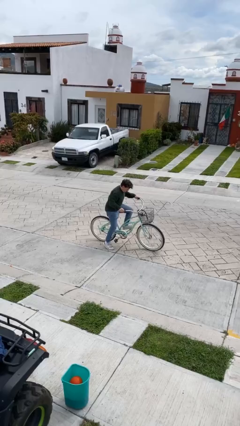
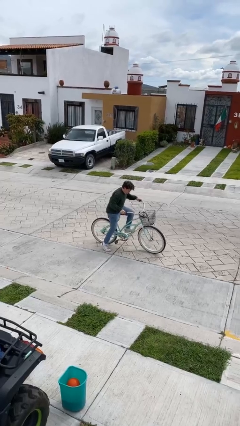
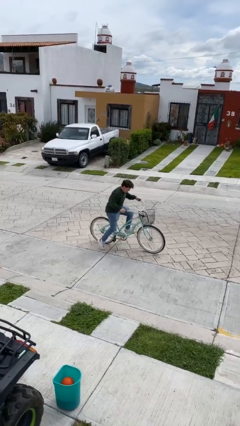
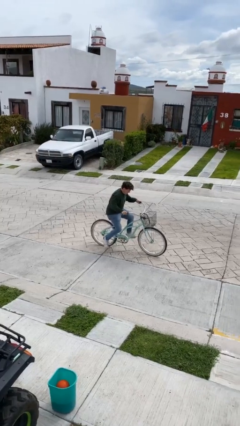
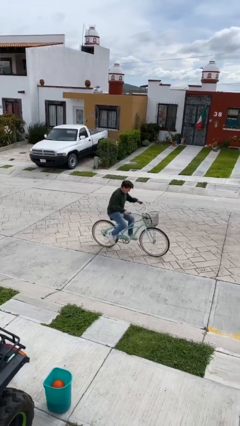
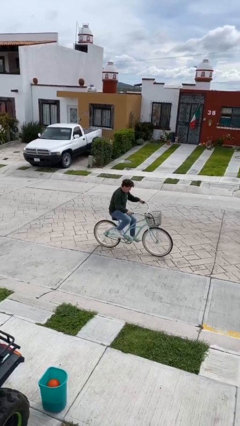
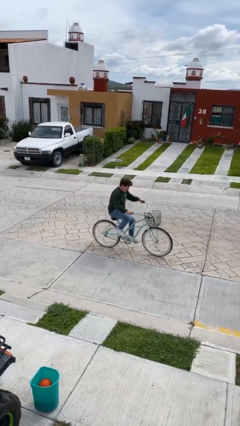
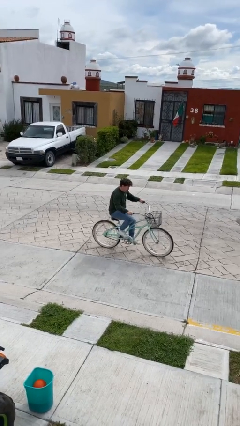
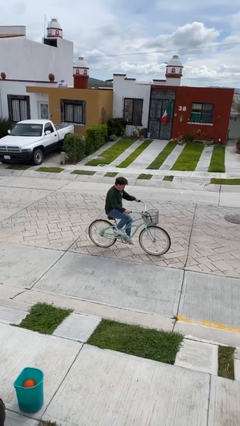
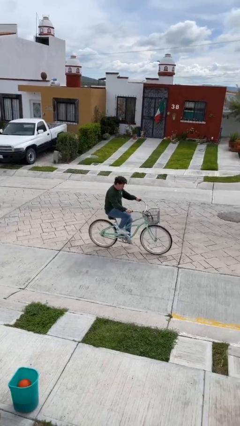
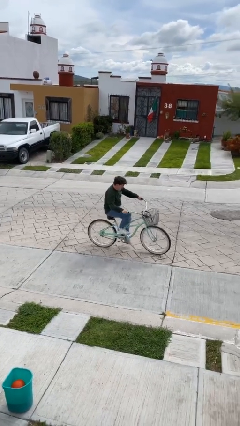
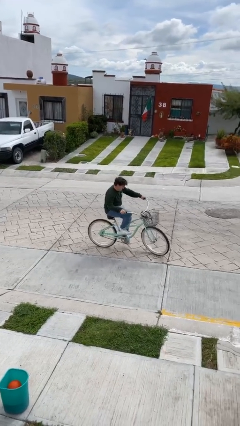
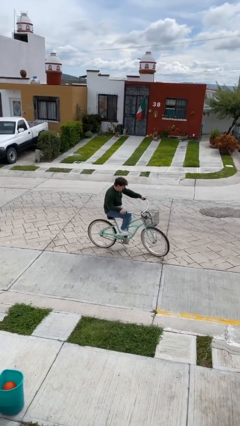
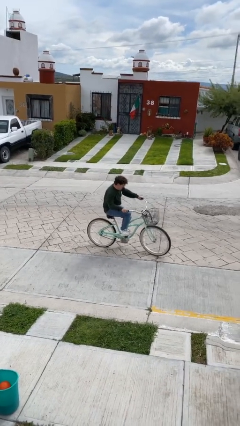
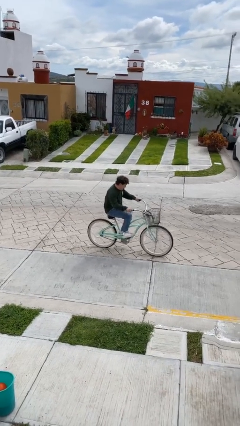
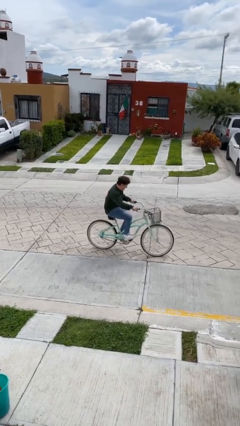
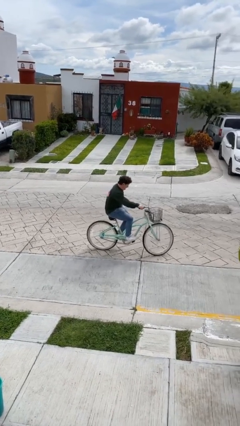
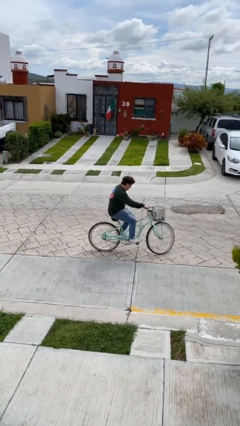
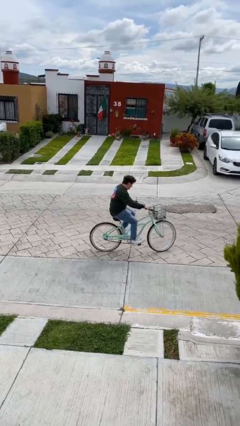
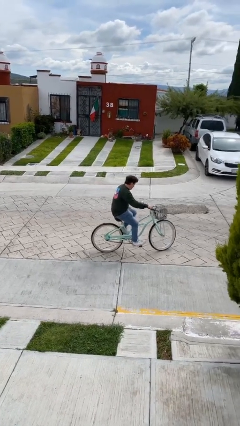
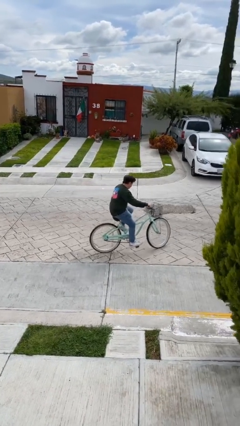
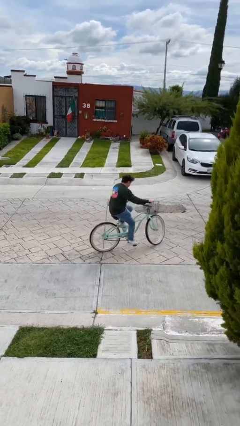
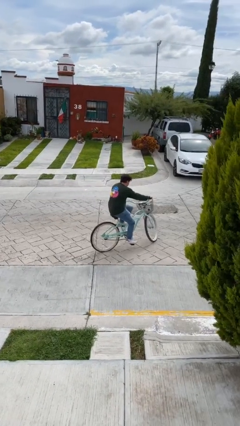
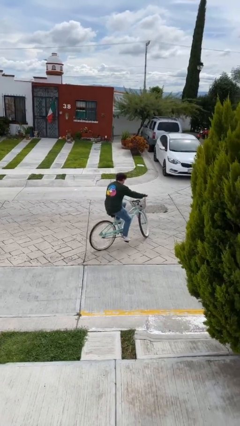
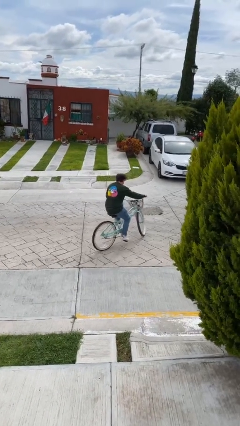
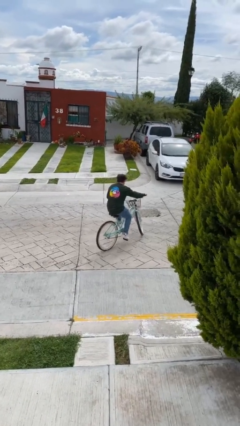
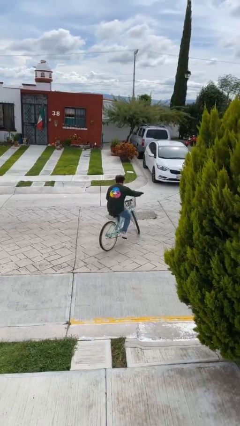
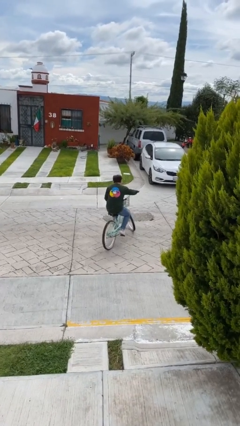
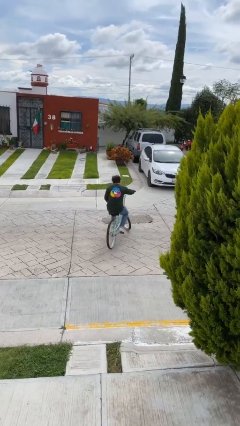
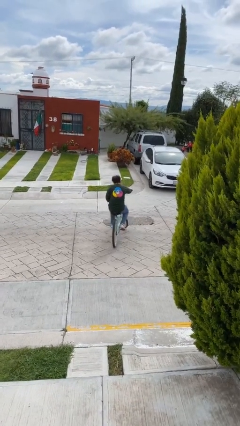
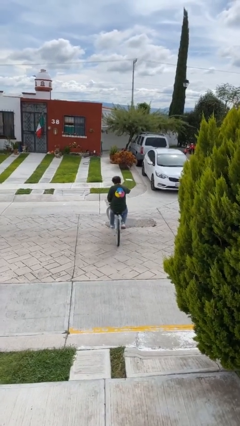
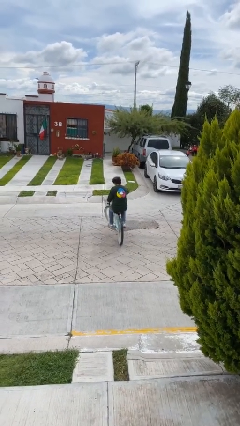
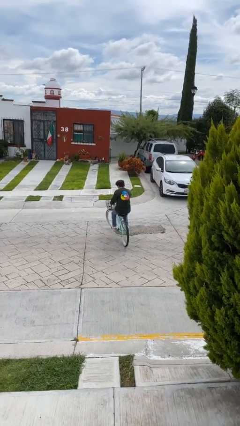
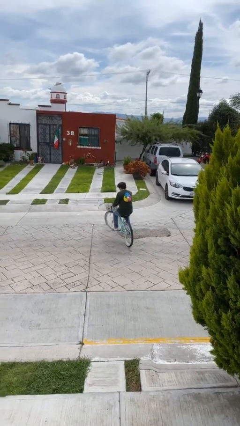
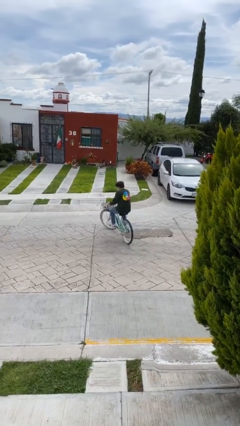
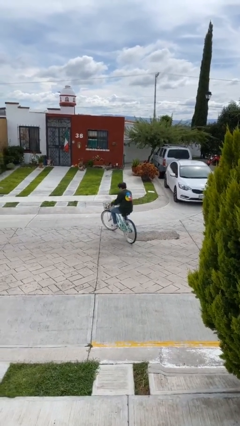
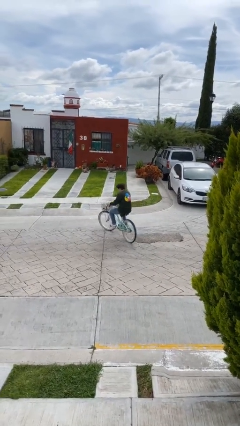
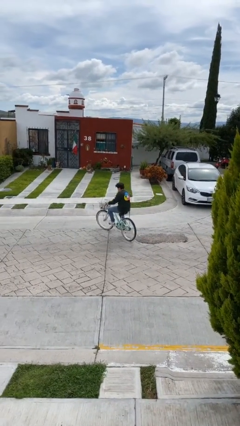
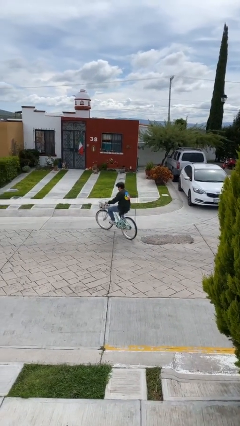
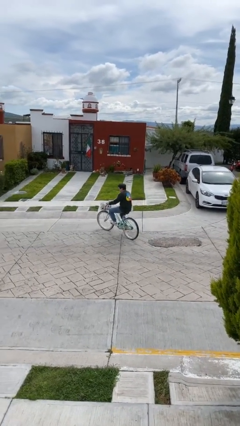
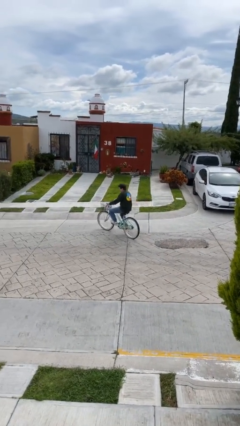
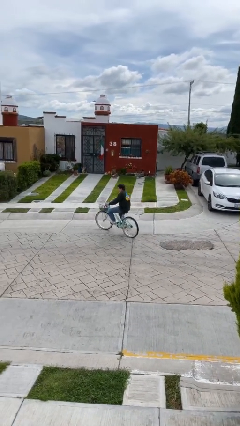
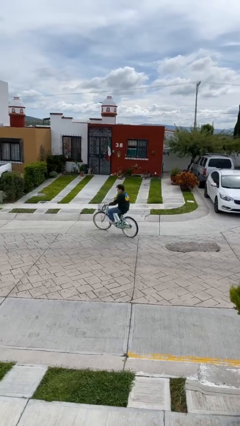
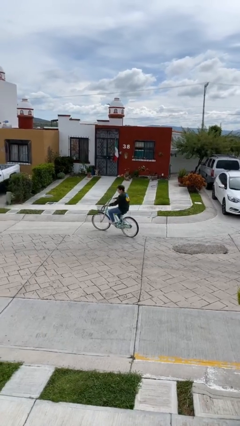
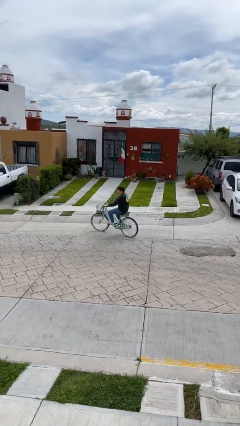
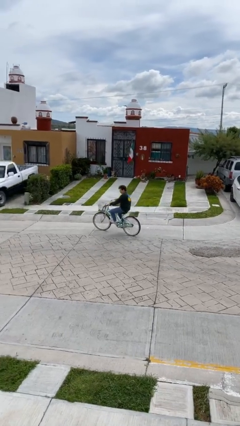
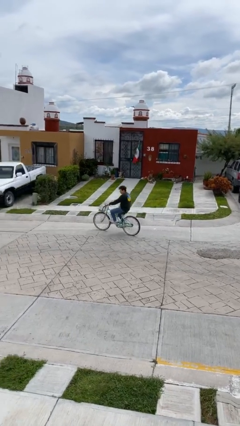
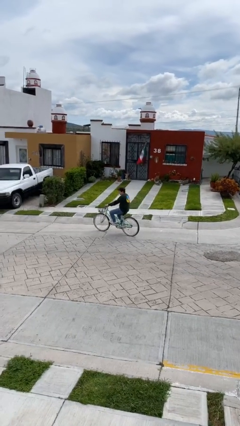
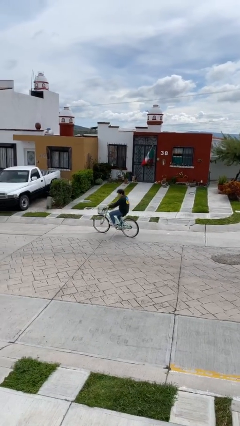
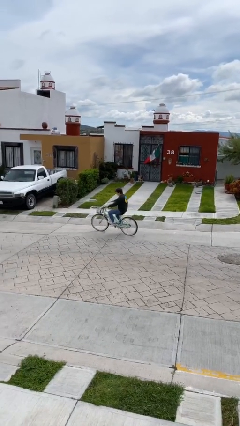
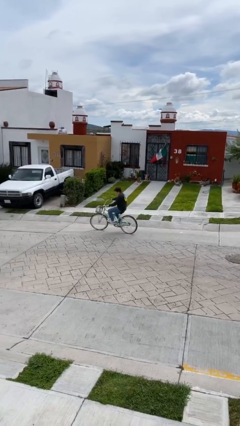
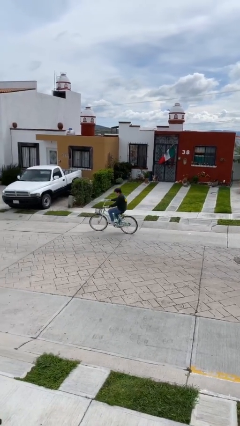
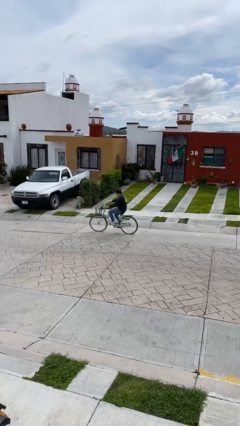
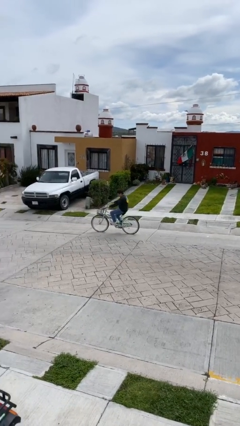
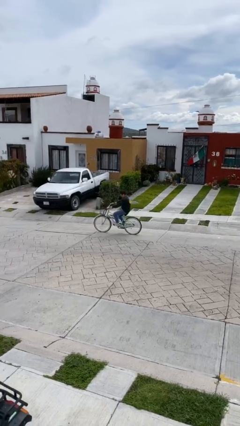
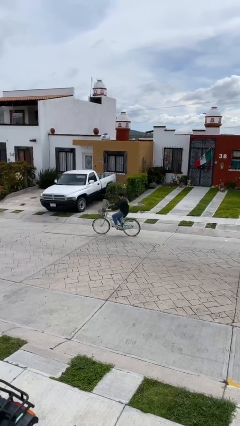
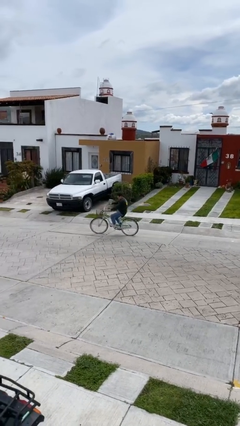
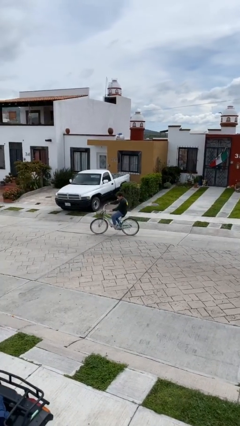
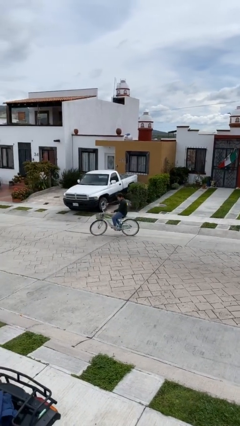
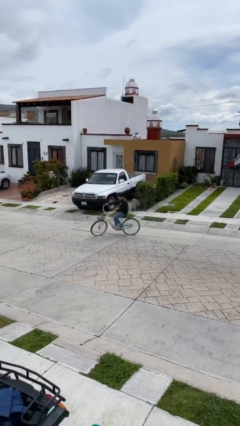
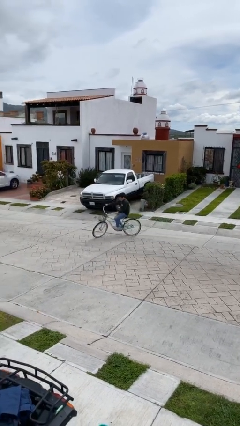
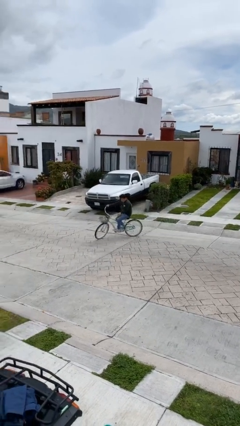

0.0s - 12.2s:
person rides bicycle

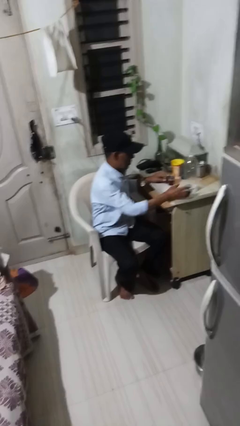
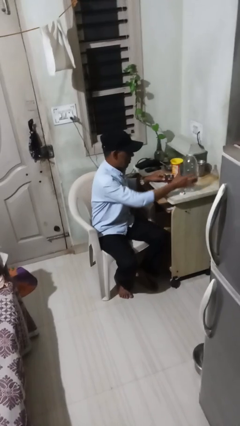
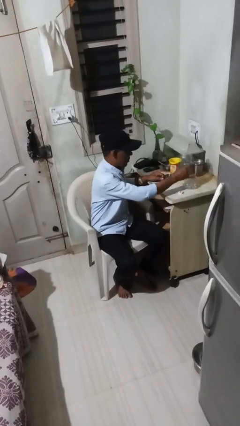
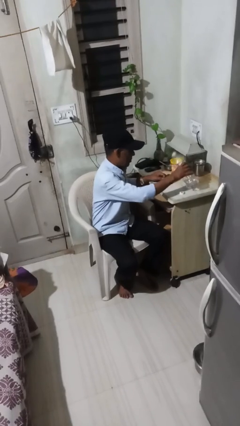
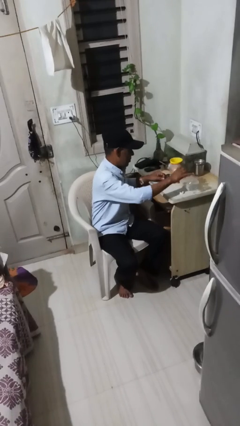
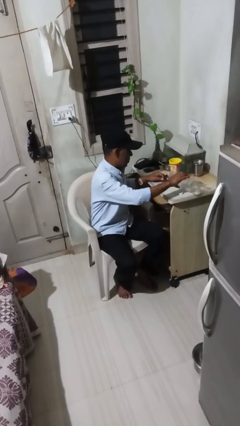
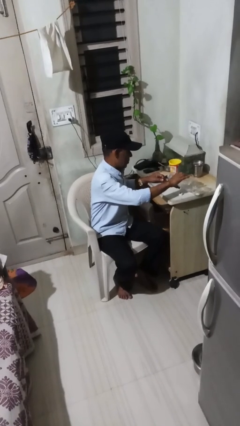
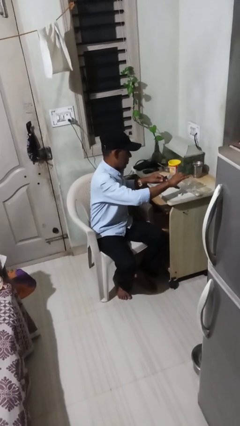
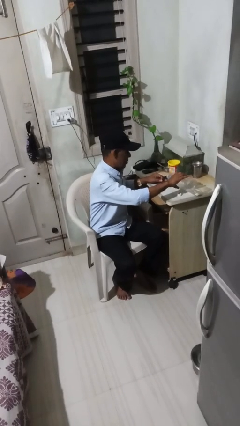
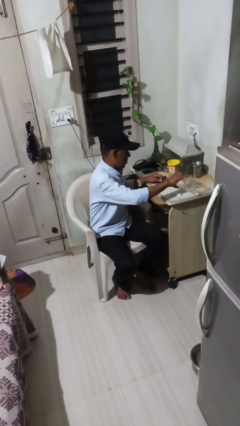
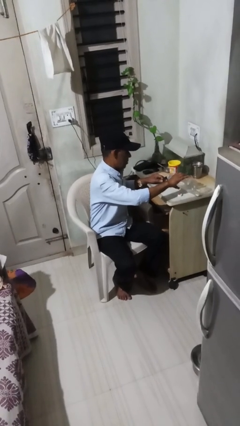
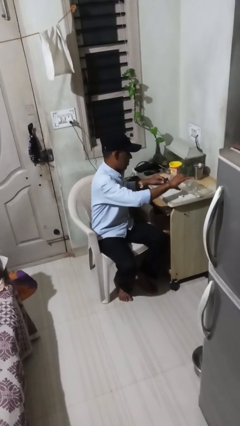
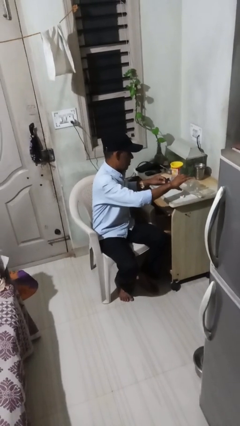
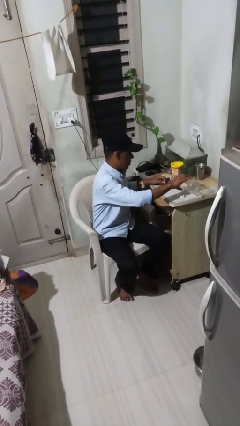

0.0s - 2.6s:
person pours liquid into cup

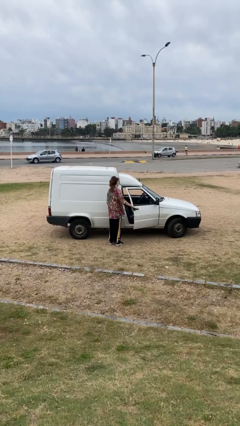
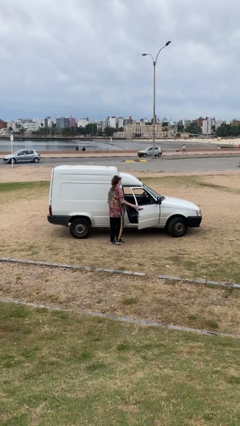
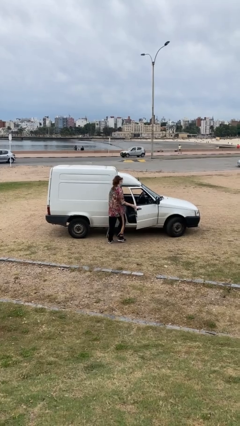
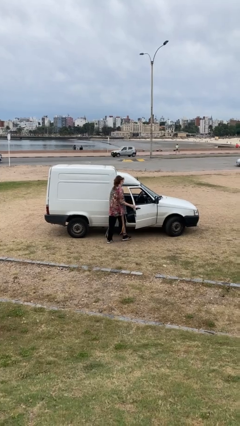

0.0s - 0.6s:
person opens car door

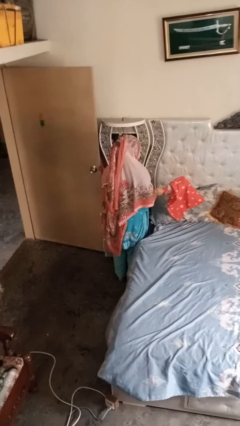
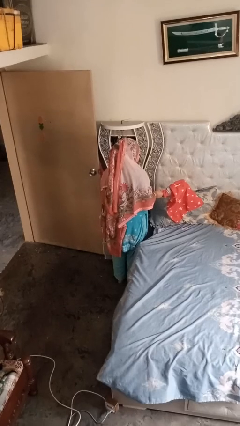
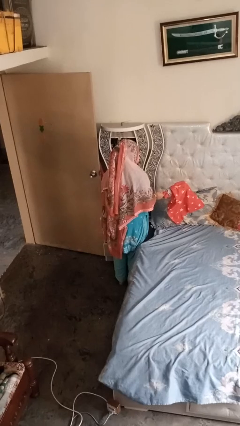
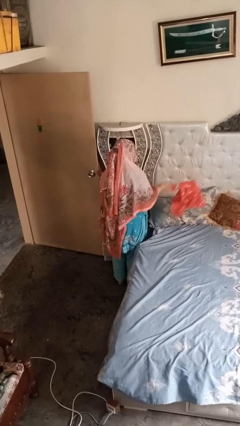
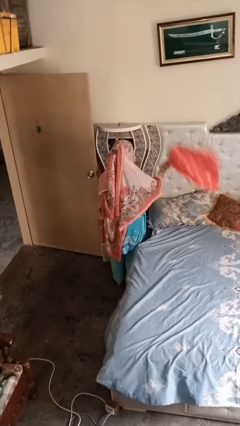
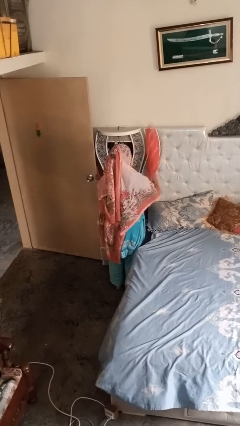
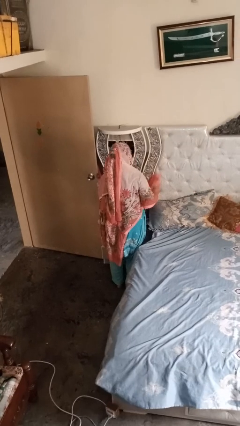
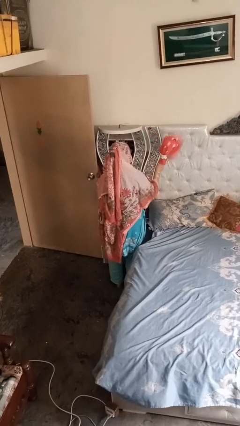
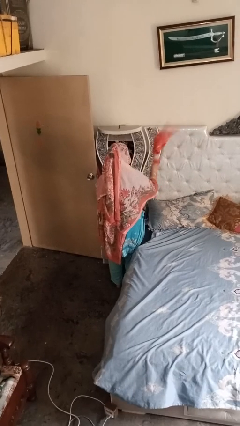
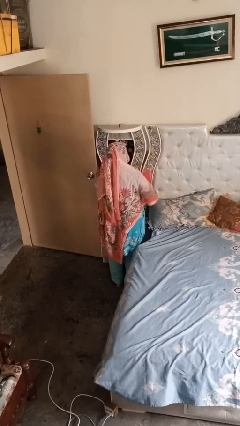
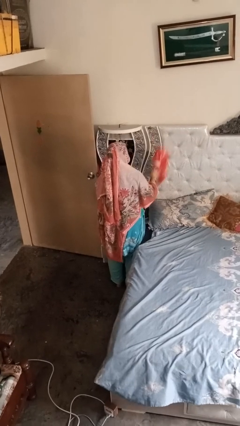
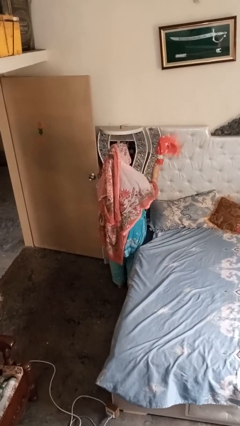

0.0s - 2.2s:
person dusts furniture

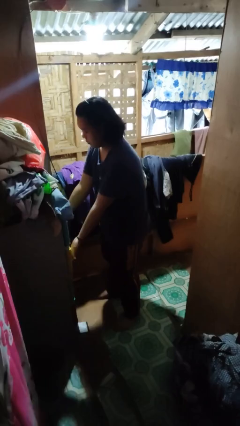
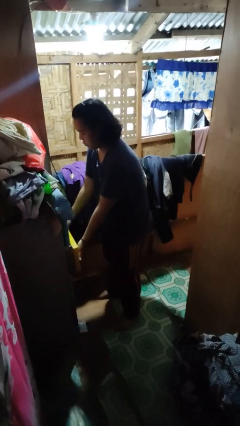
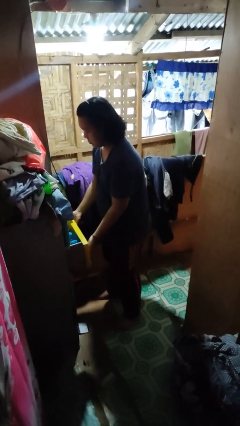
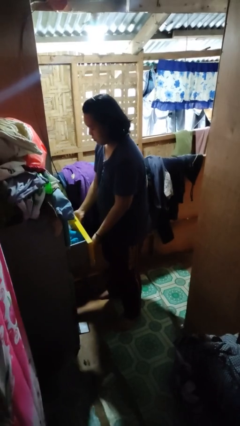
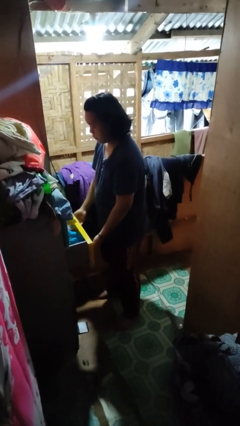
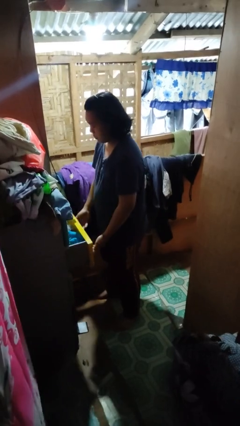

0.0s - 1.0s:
person opens dresser drawer
